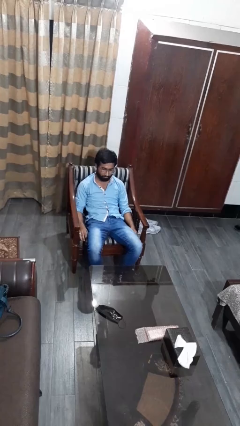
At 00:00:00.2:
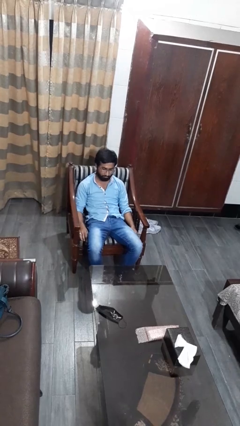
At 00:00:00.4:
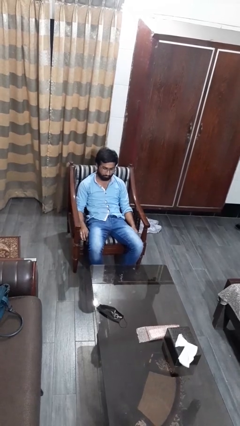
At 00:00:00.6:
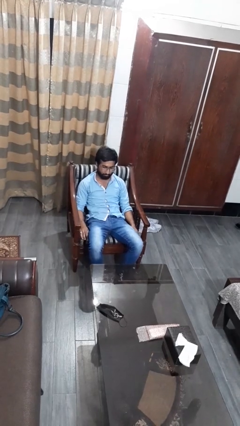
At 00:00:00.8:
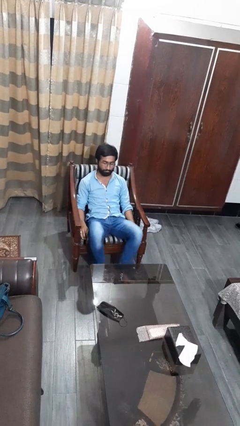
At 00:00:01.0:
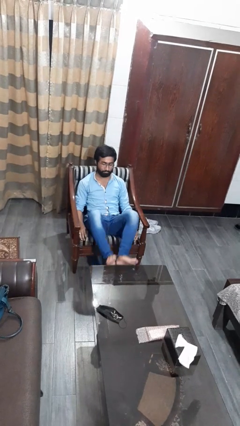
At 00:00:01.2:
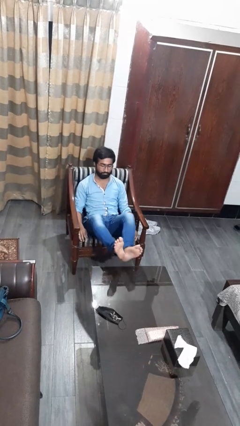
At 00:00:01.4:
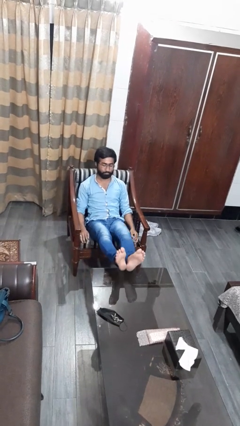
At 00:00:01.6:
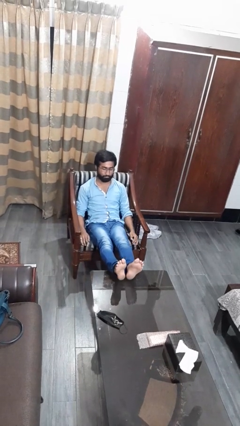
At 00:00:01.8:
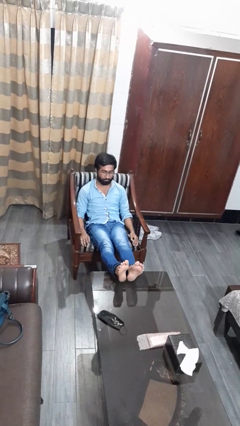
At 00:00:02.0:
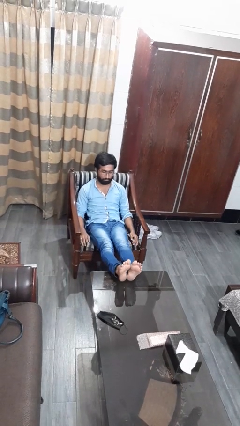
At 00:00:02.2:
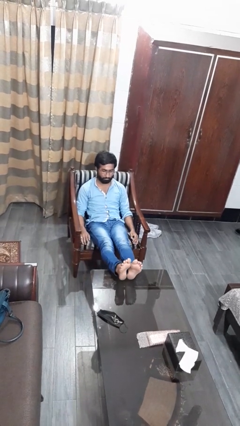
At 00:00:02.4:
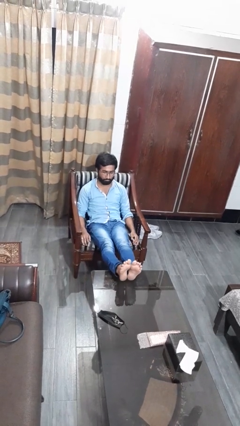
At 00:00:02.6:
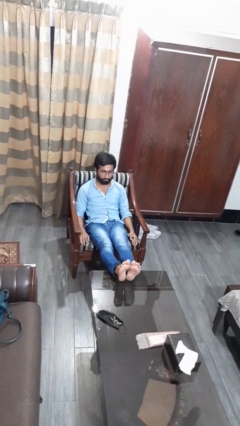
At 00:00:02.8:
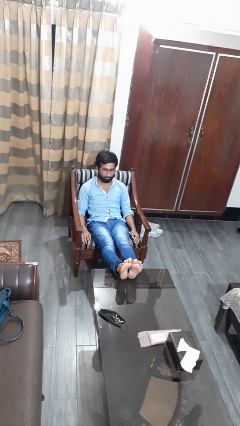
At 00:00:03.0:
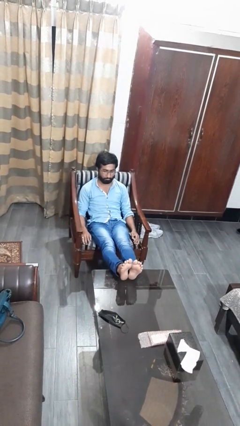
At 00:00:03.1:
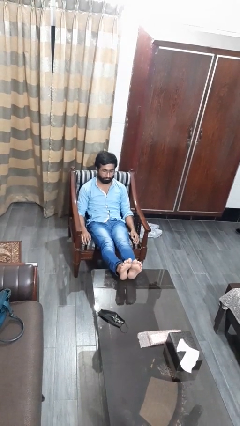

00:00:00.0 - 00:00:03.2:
person puts feet up

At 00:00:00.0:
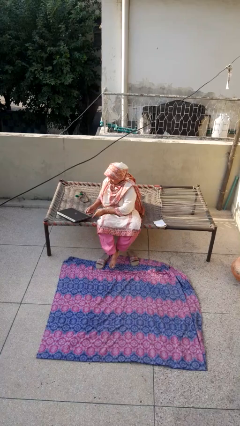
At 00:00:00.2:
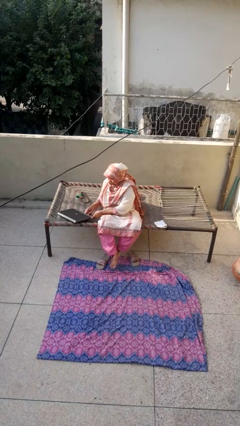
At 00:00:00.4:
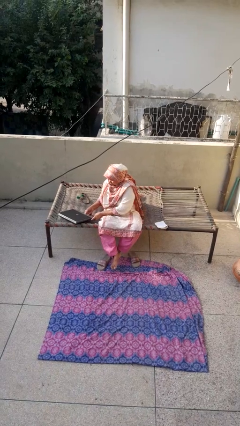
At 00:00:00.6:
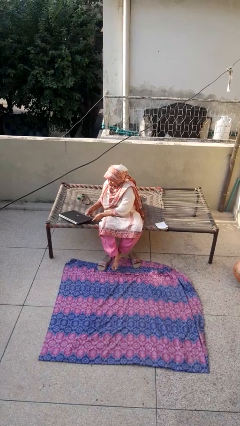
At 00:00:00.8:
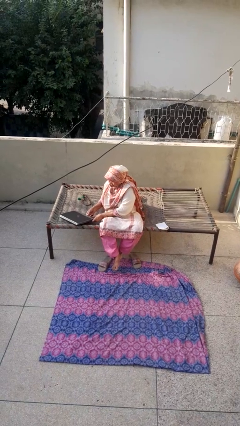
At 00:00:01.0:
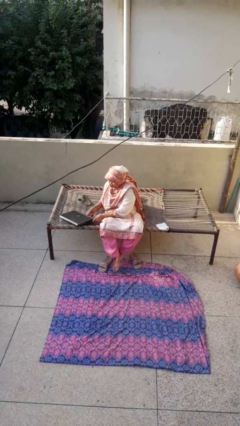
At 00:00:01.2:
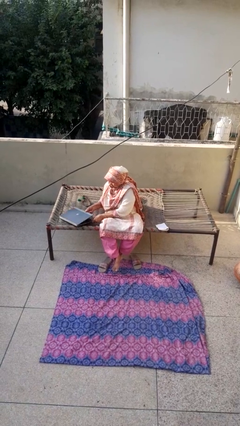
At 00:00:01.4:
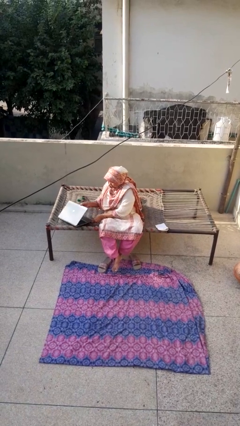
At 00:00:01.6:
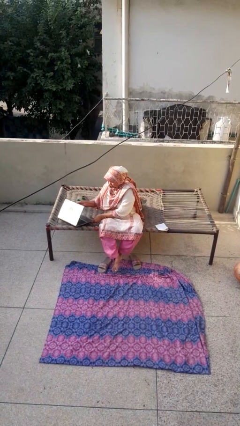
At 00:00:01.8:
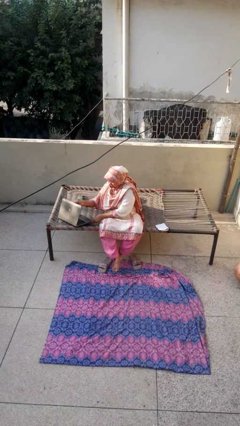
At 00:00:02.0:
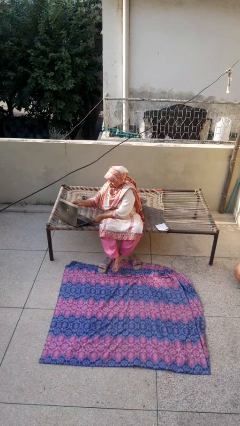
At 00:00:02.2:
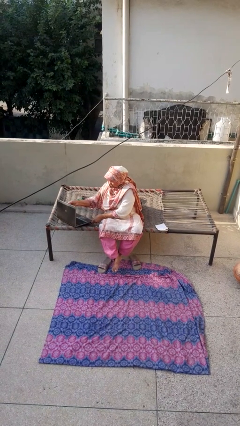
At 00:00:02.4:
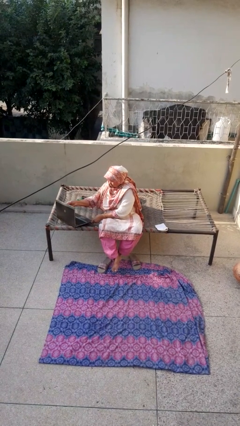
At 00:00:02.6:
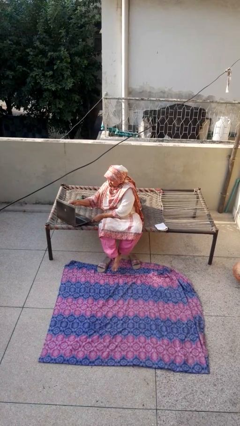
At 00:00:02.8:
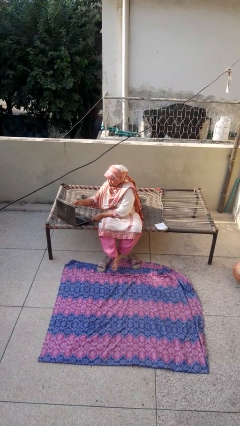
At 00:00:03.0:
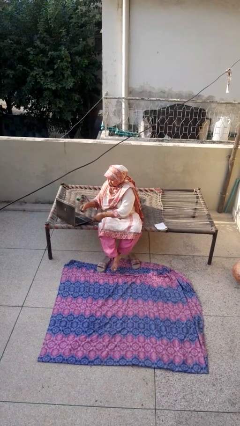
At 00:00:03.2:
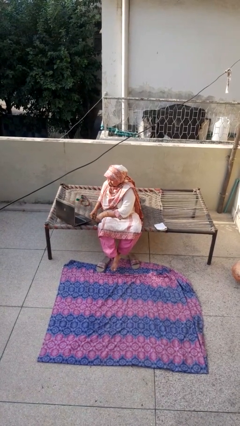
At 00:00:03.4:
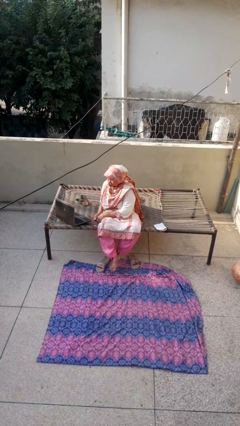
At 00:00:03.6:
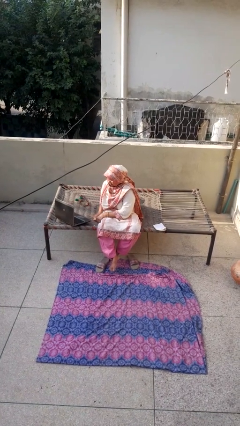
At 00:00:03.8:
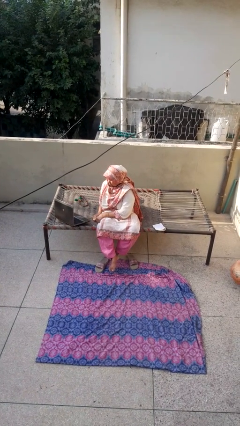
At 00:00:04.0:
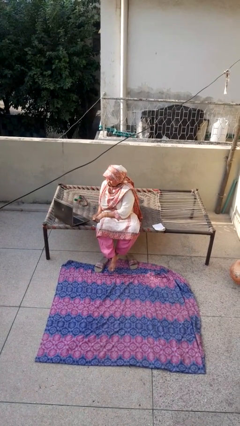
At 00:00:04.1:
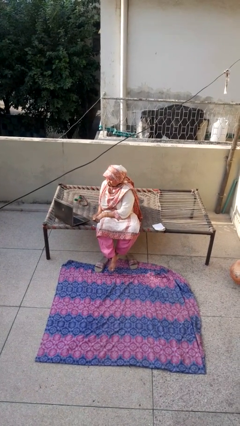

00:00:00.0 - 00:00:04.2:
person opens laptop

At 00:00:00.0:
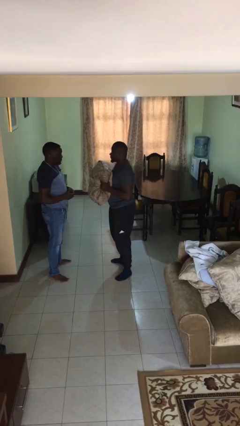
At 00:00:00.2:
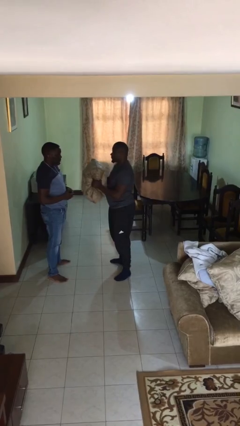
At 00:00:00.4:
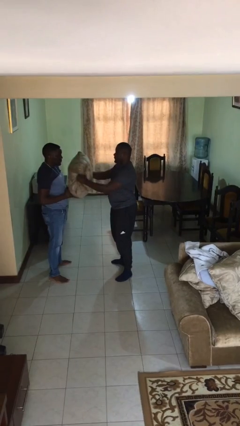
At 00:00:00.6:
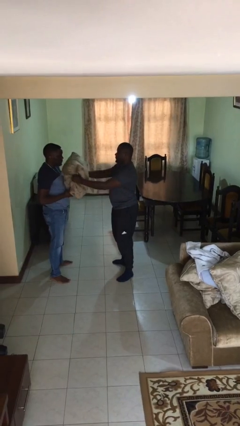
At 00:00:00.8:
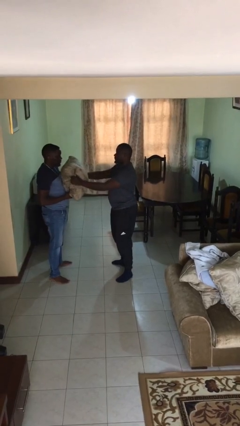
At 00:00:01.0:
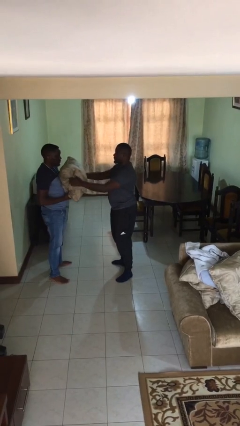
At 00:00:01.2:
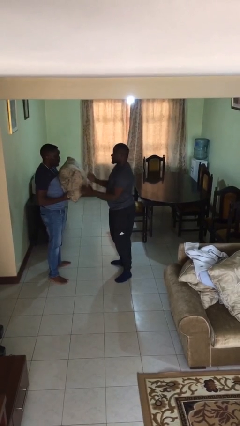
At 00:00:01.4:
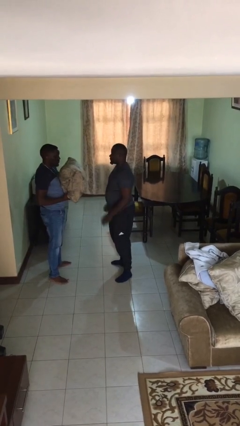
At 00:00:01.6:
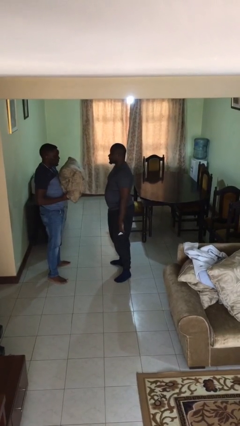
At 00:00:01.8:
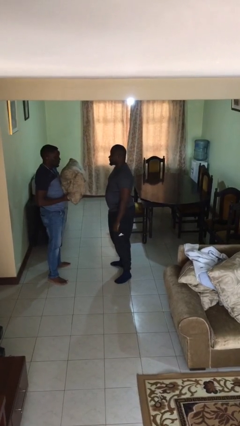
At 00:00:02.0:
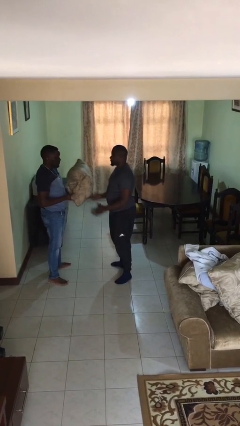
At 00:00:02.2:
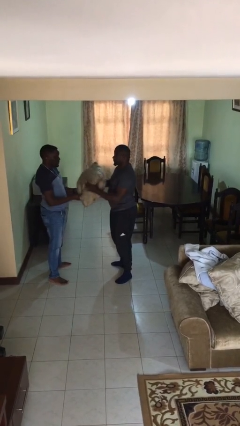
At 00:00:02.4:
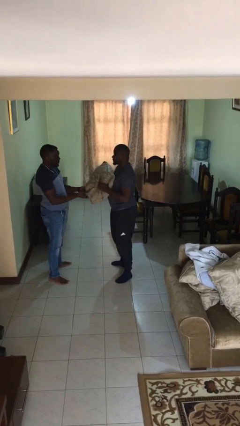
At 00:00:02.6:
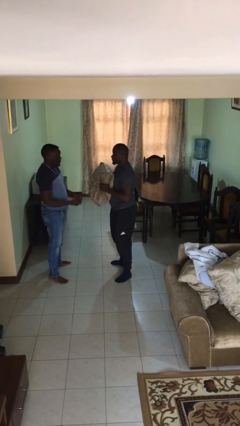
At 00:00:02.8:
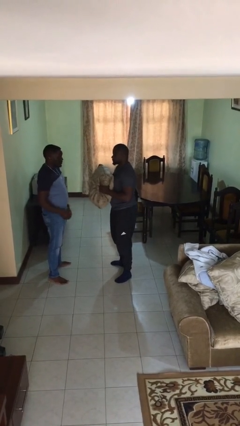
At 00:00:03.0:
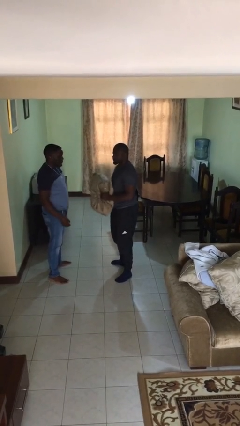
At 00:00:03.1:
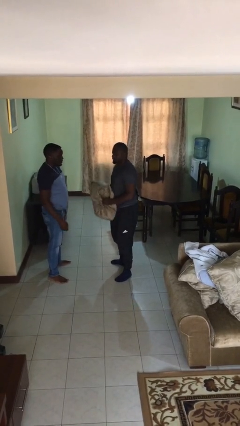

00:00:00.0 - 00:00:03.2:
person transfers object to person

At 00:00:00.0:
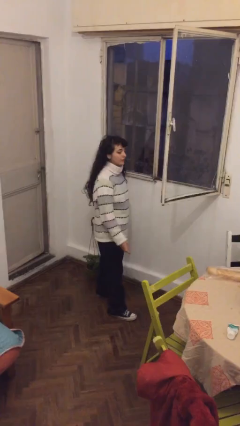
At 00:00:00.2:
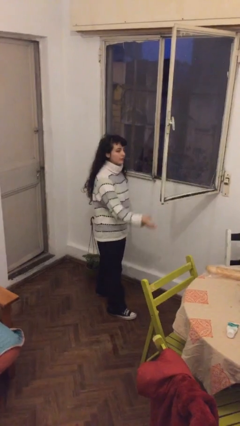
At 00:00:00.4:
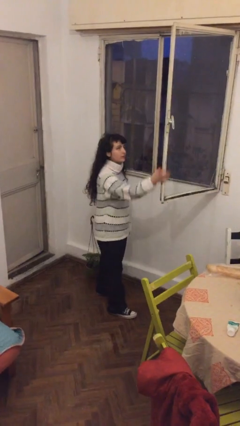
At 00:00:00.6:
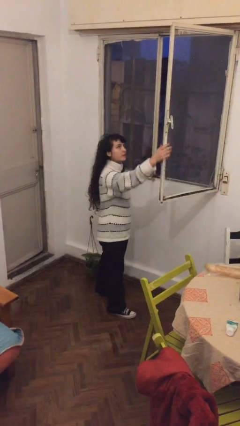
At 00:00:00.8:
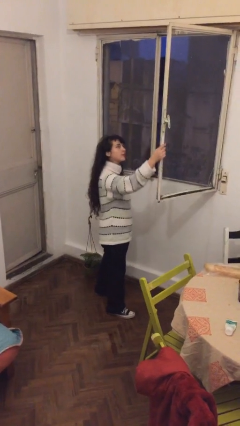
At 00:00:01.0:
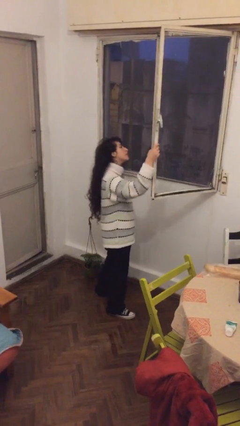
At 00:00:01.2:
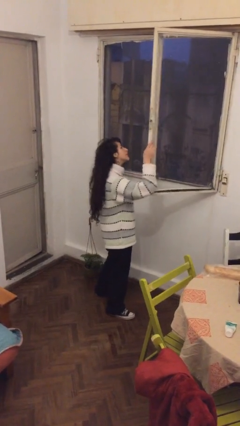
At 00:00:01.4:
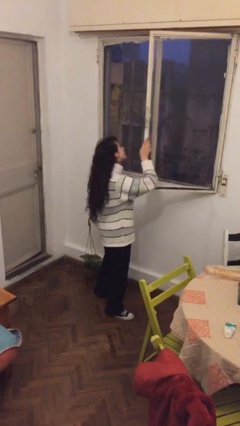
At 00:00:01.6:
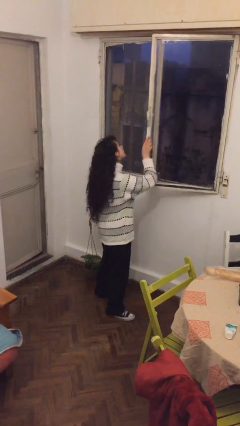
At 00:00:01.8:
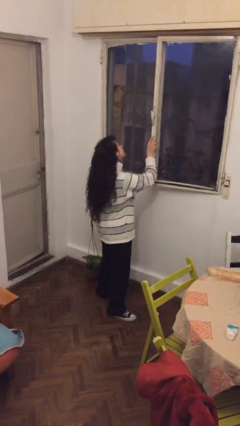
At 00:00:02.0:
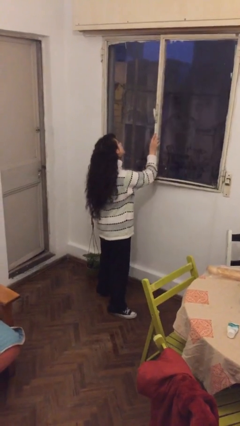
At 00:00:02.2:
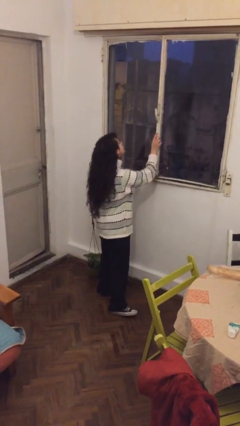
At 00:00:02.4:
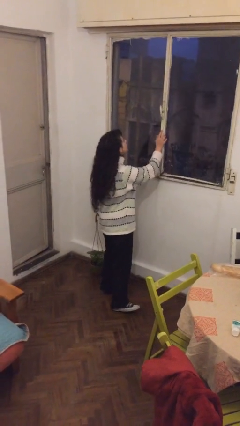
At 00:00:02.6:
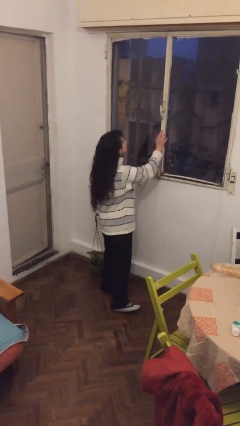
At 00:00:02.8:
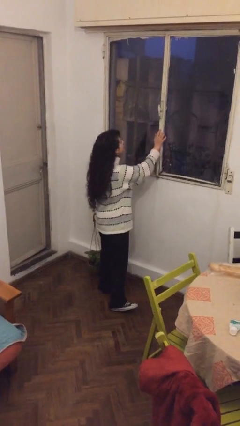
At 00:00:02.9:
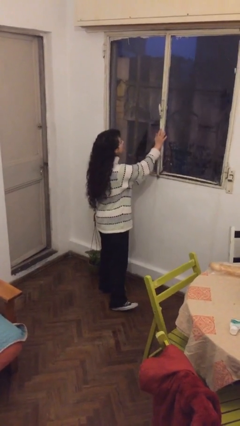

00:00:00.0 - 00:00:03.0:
person closes home window

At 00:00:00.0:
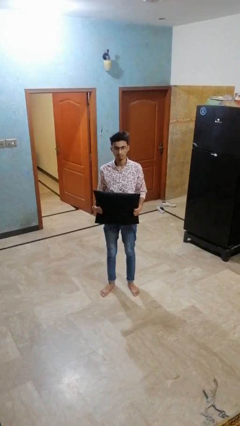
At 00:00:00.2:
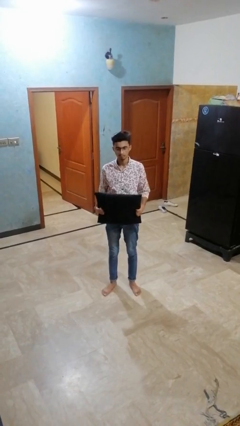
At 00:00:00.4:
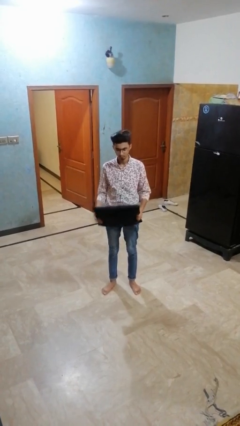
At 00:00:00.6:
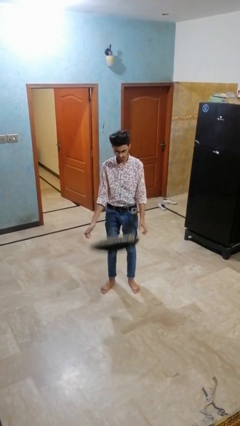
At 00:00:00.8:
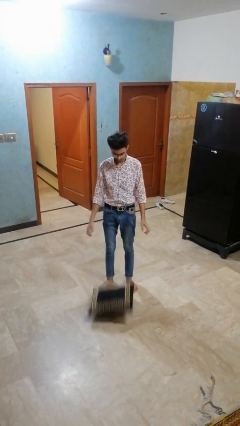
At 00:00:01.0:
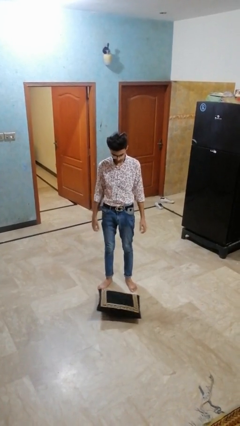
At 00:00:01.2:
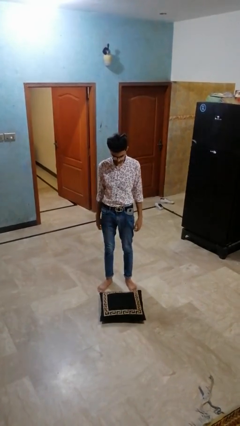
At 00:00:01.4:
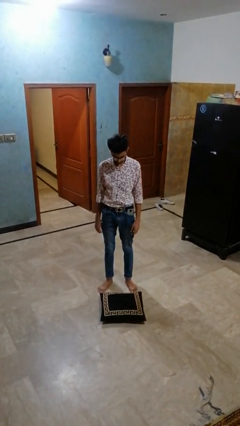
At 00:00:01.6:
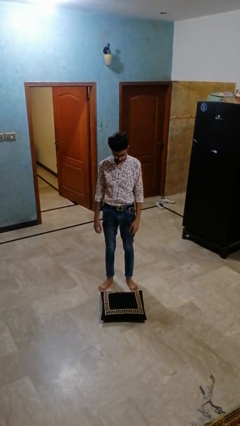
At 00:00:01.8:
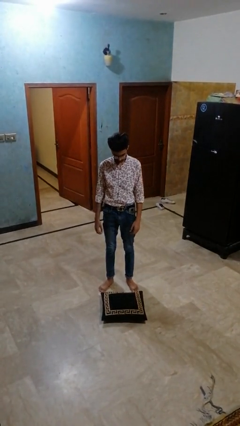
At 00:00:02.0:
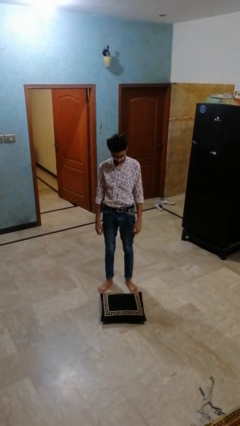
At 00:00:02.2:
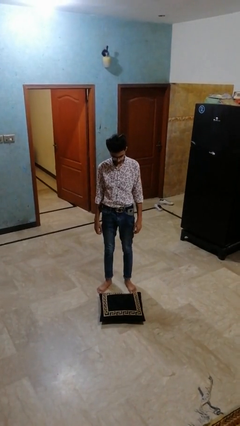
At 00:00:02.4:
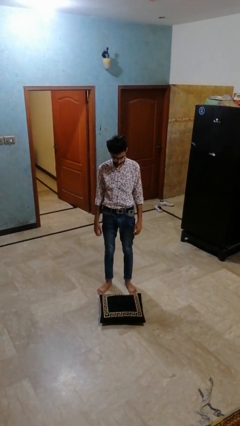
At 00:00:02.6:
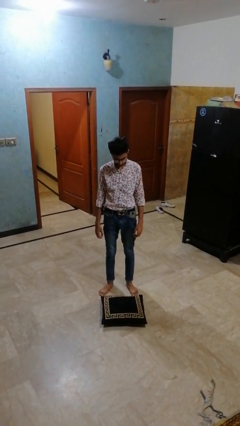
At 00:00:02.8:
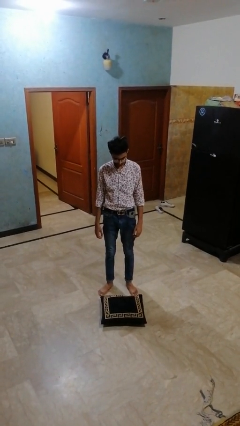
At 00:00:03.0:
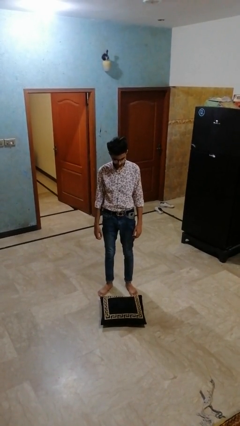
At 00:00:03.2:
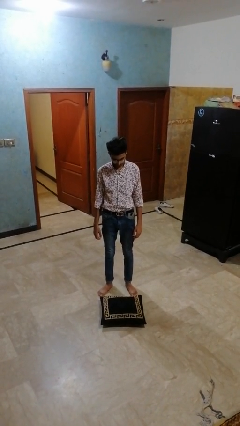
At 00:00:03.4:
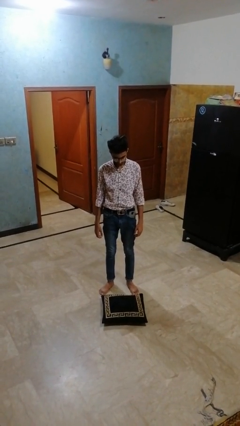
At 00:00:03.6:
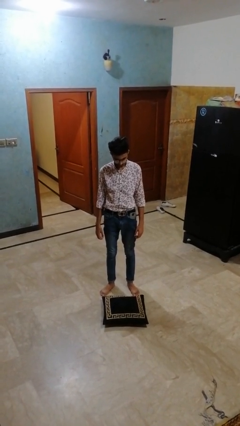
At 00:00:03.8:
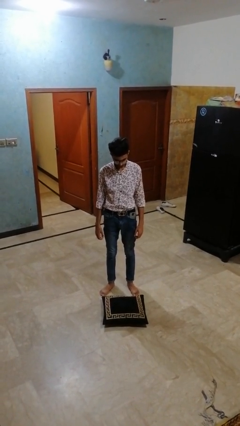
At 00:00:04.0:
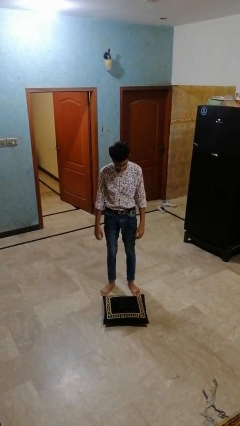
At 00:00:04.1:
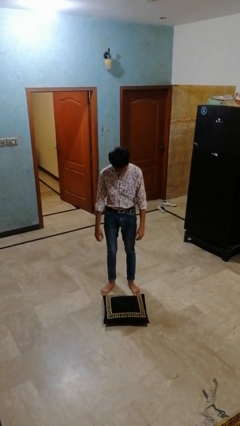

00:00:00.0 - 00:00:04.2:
person throws object to ground
